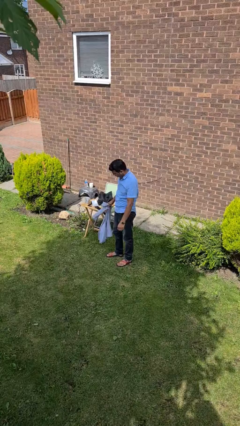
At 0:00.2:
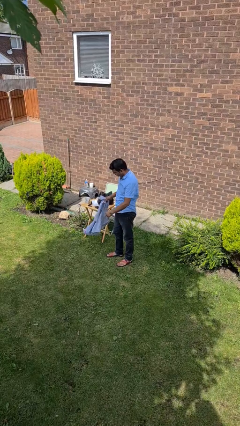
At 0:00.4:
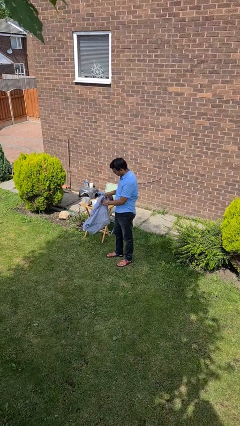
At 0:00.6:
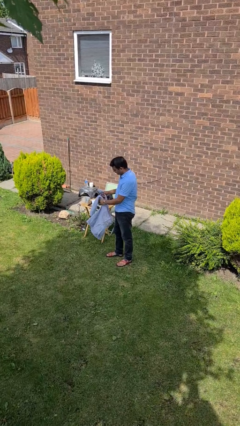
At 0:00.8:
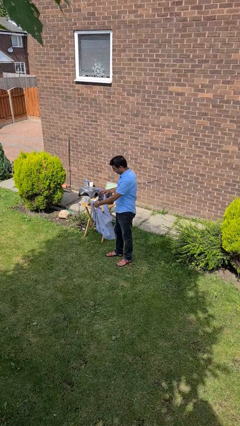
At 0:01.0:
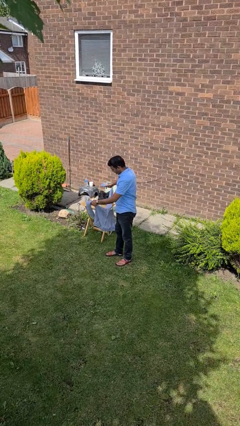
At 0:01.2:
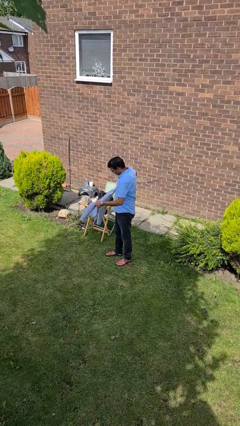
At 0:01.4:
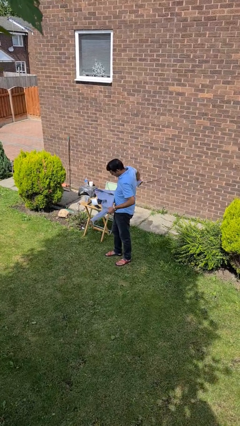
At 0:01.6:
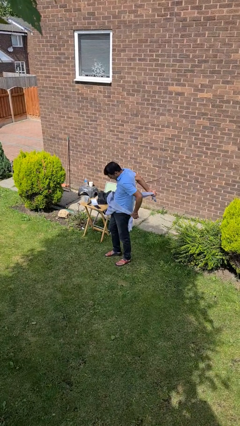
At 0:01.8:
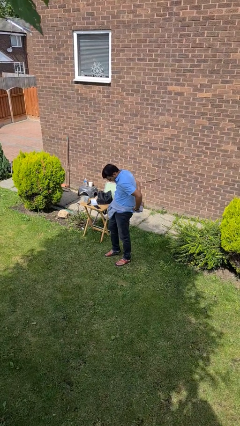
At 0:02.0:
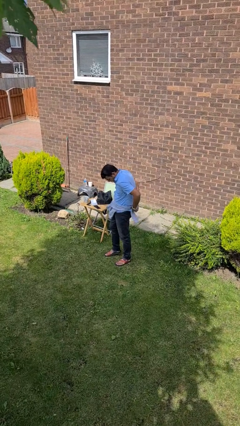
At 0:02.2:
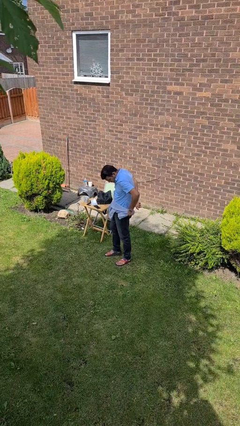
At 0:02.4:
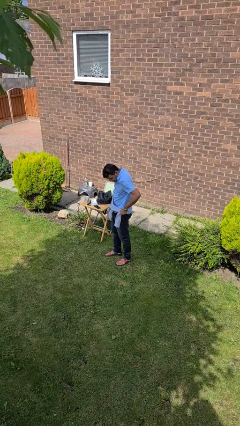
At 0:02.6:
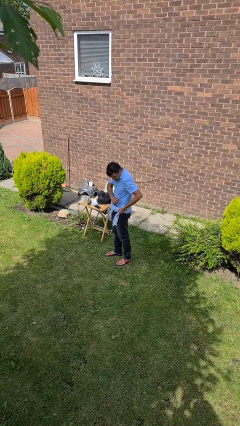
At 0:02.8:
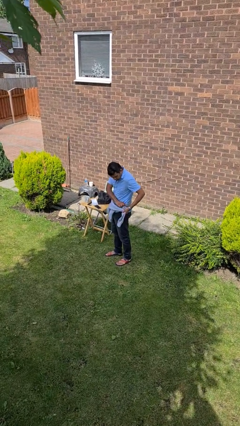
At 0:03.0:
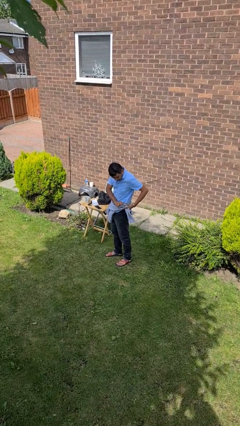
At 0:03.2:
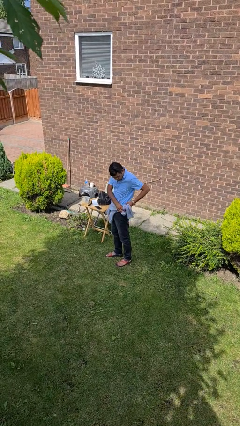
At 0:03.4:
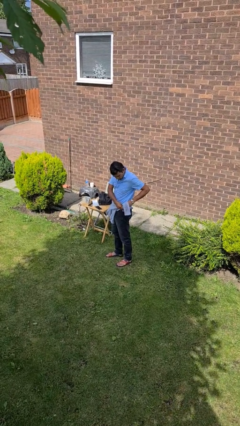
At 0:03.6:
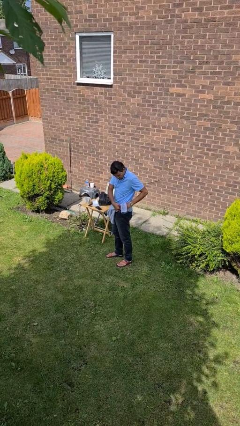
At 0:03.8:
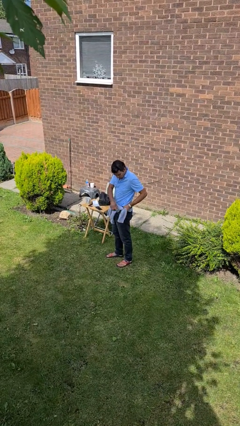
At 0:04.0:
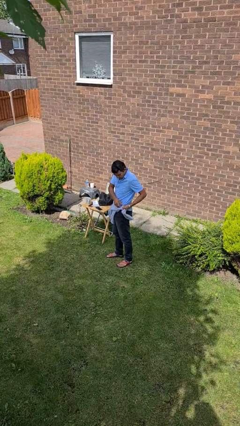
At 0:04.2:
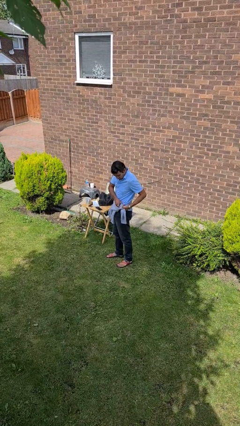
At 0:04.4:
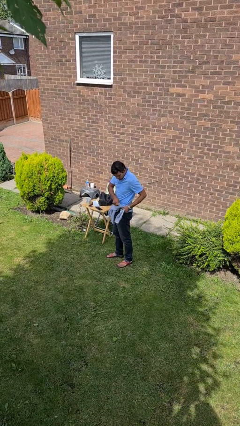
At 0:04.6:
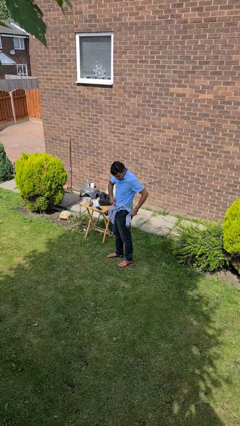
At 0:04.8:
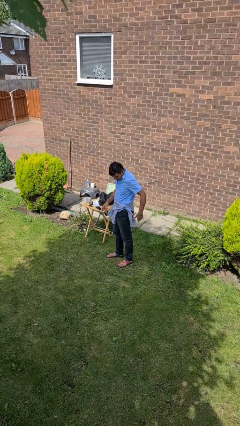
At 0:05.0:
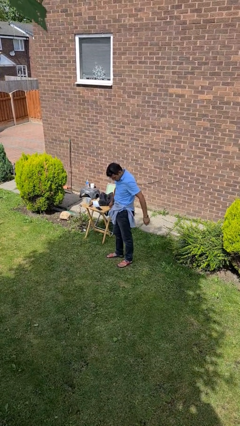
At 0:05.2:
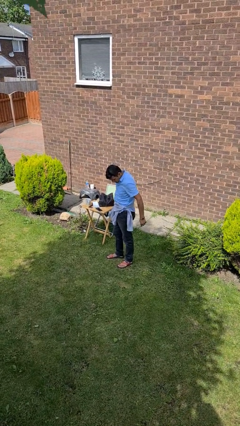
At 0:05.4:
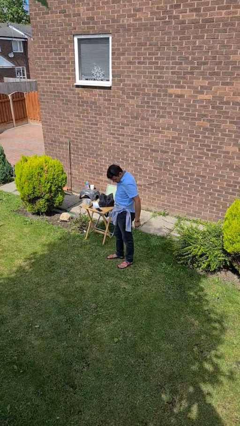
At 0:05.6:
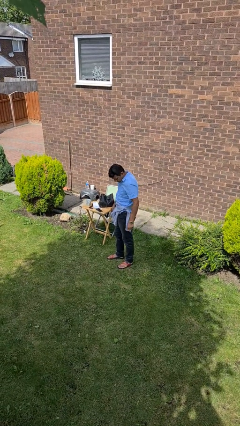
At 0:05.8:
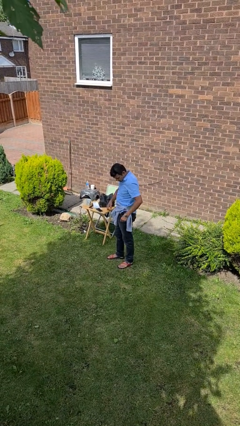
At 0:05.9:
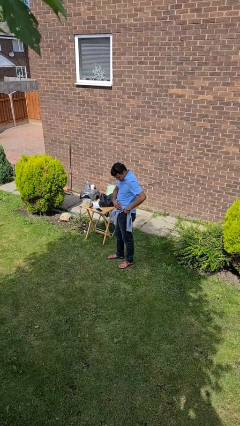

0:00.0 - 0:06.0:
person ties jacket around waist

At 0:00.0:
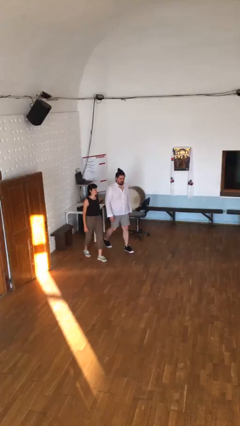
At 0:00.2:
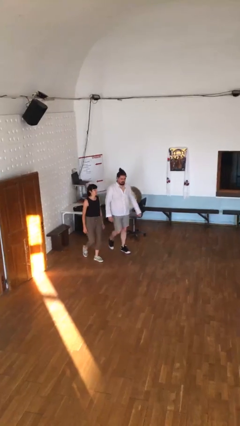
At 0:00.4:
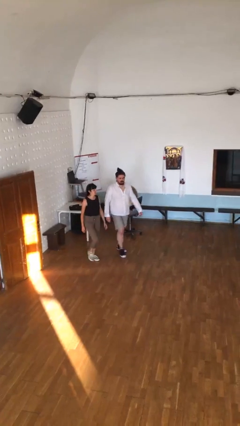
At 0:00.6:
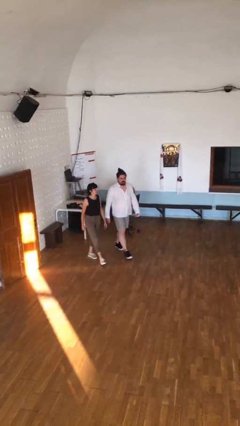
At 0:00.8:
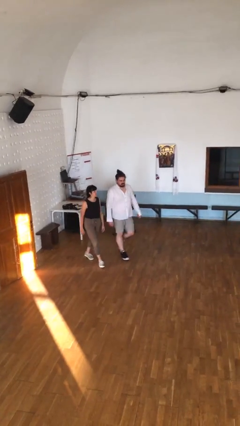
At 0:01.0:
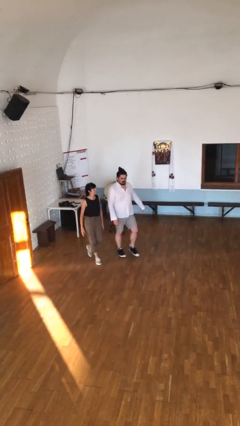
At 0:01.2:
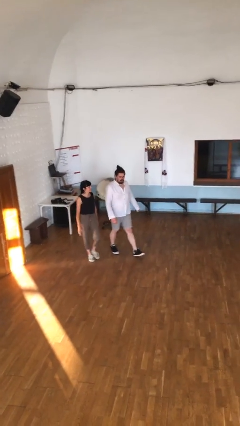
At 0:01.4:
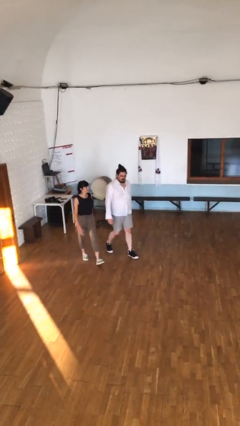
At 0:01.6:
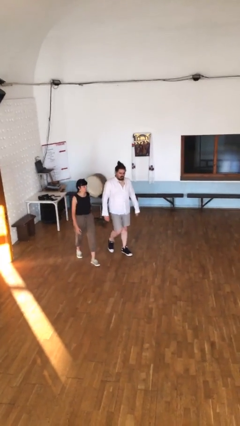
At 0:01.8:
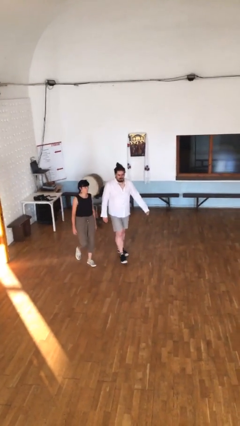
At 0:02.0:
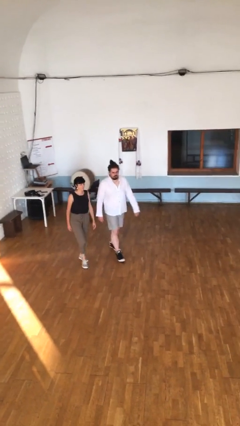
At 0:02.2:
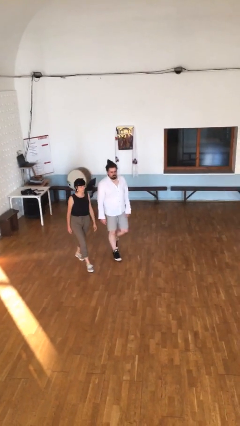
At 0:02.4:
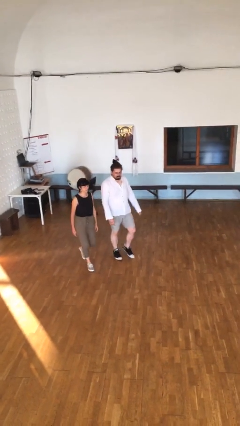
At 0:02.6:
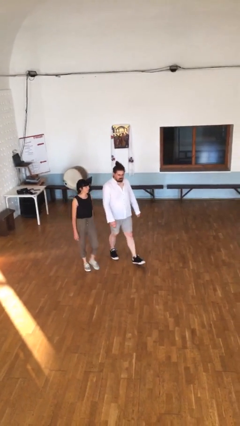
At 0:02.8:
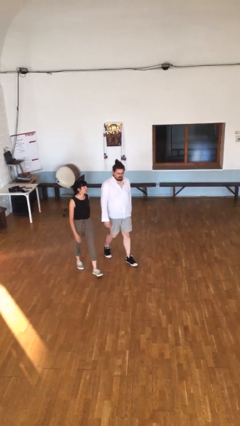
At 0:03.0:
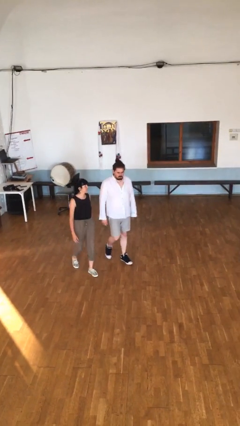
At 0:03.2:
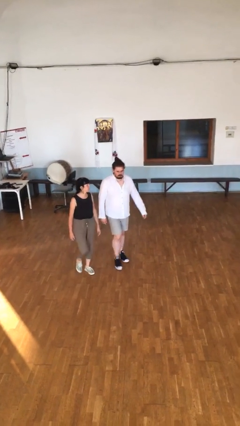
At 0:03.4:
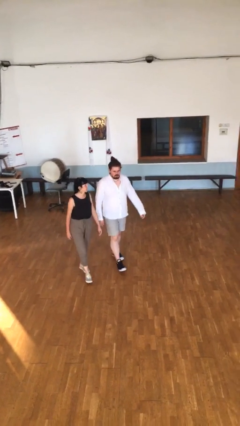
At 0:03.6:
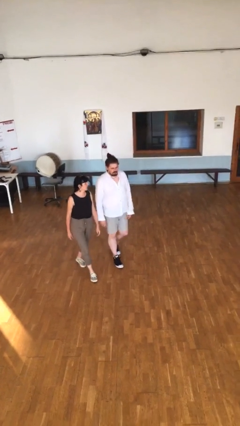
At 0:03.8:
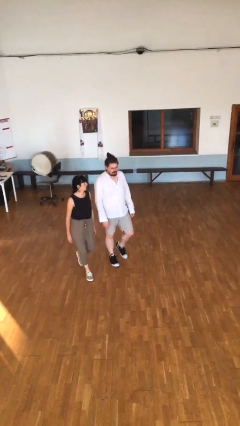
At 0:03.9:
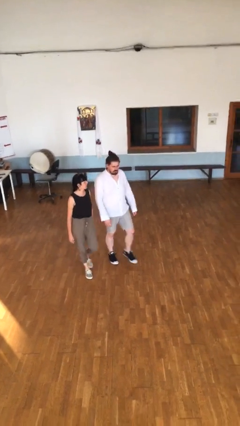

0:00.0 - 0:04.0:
person talks to person

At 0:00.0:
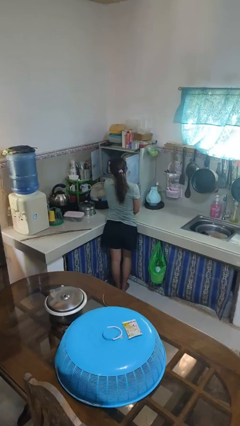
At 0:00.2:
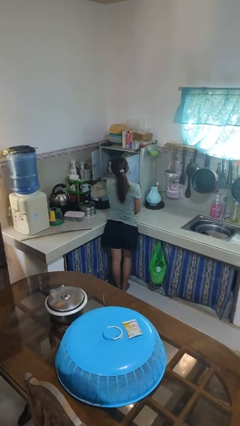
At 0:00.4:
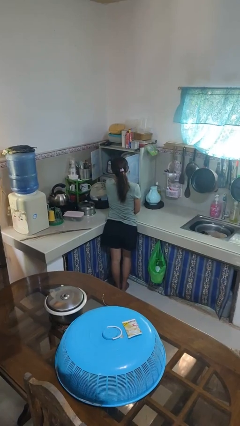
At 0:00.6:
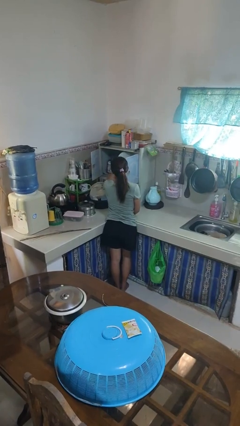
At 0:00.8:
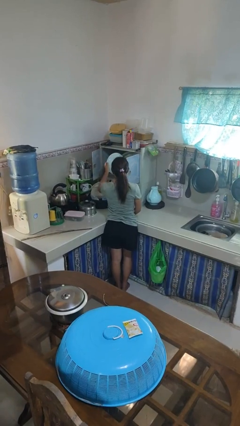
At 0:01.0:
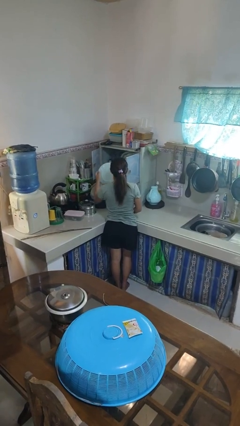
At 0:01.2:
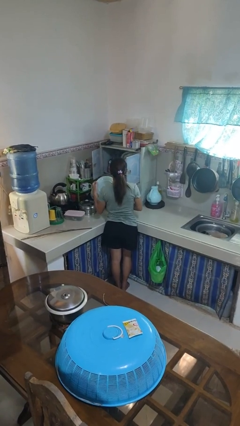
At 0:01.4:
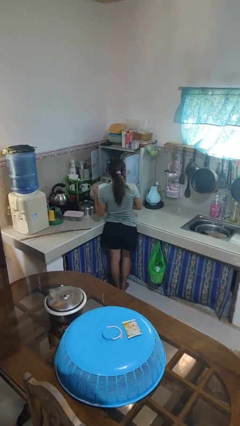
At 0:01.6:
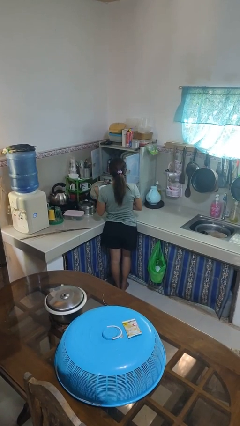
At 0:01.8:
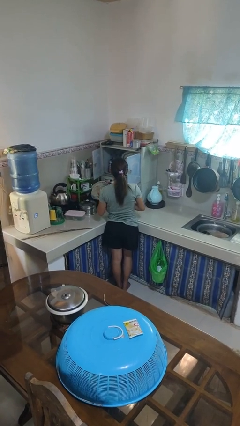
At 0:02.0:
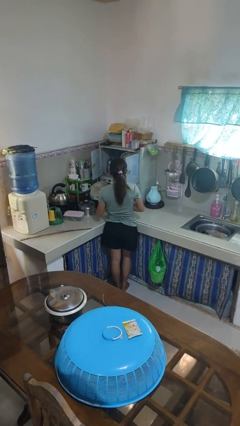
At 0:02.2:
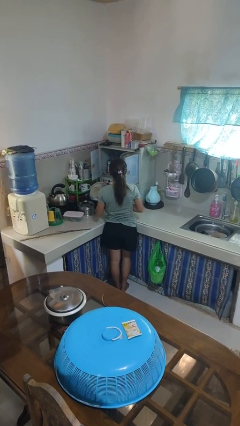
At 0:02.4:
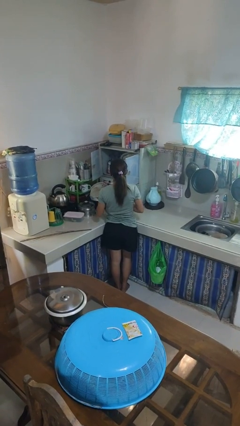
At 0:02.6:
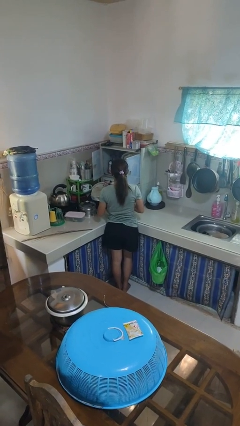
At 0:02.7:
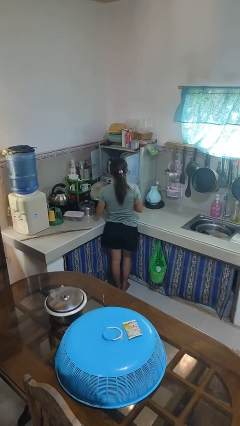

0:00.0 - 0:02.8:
person takes object from kitchen drawer

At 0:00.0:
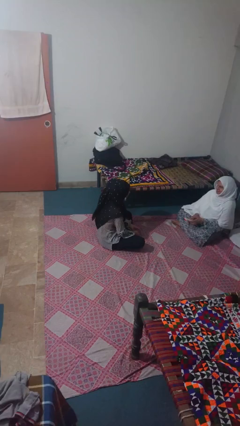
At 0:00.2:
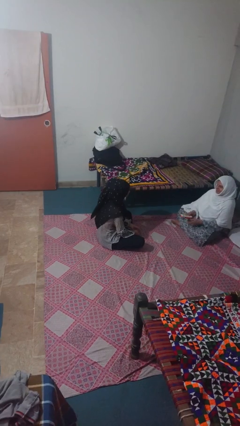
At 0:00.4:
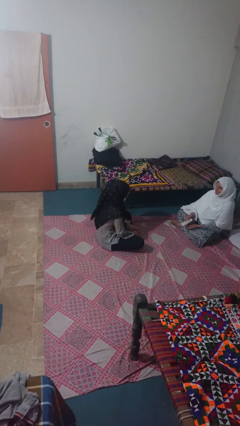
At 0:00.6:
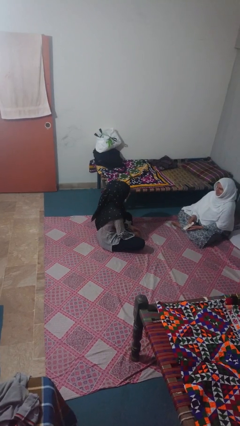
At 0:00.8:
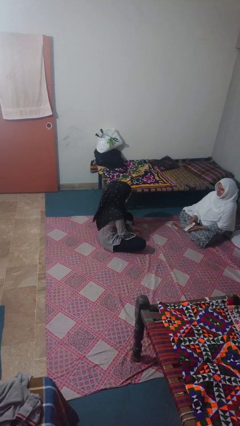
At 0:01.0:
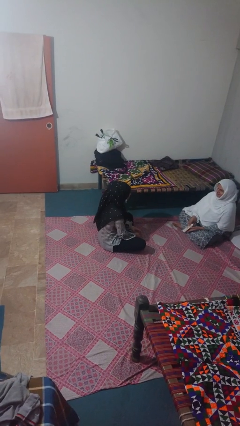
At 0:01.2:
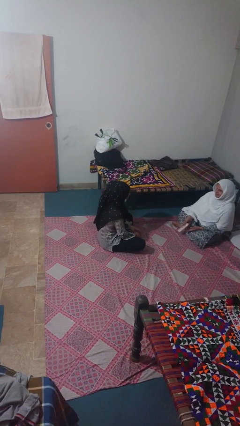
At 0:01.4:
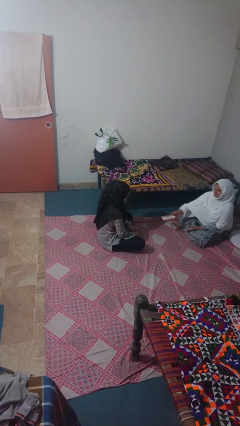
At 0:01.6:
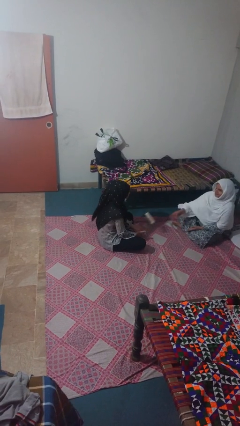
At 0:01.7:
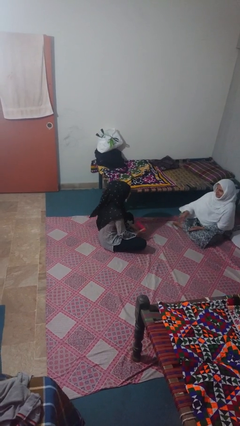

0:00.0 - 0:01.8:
person catches object from person

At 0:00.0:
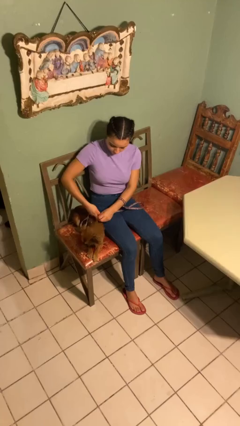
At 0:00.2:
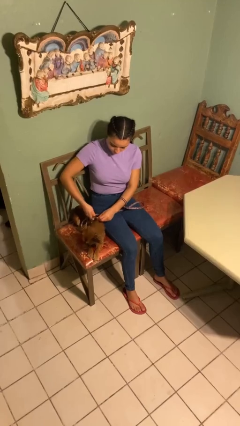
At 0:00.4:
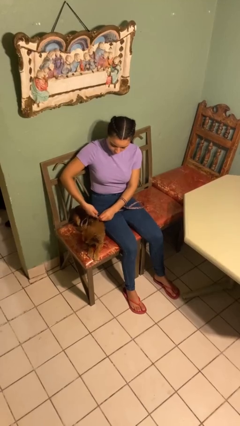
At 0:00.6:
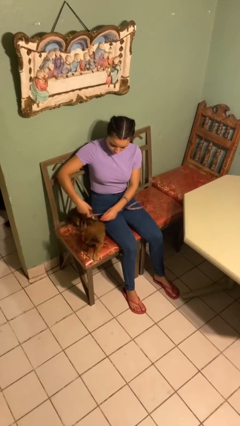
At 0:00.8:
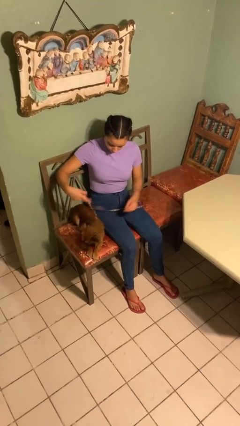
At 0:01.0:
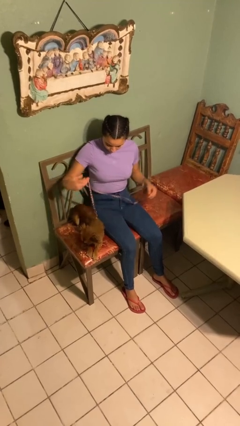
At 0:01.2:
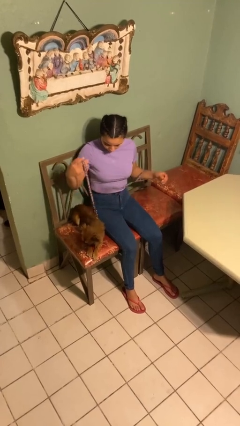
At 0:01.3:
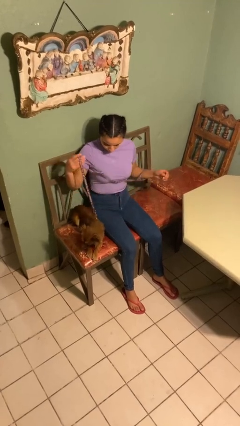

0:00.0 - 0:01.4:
person attaches leash to dog

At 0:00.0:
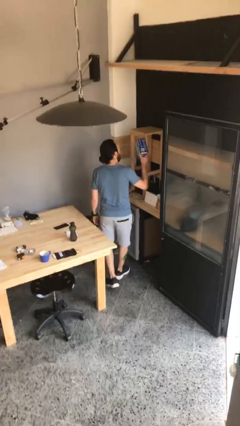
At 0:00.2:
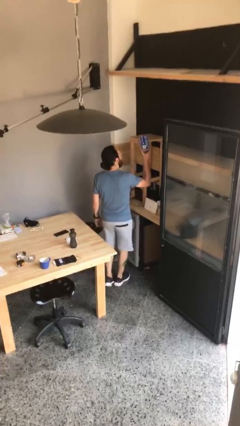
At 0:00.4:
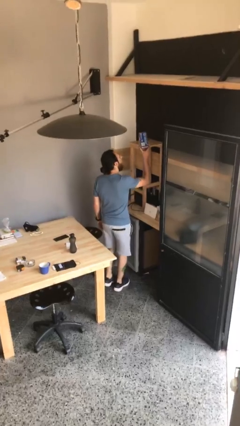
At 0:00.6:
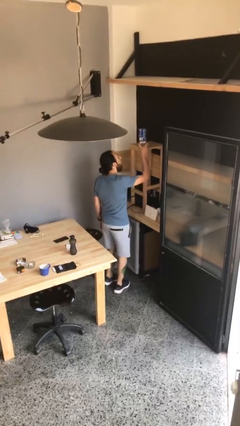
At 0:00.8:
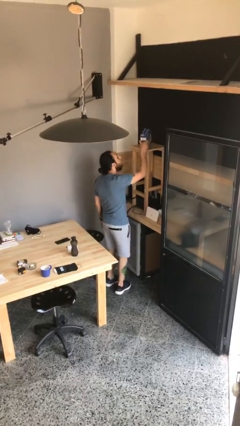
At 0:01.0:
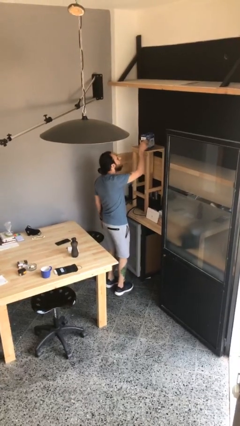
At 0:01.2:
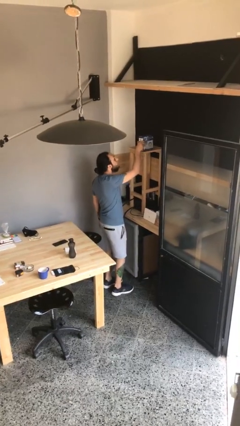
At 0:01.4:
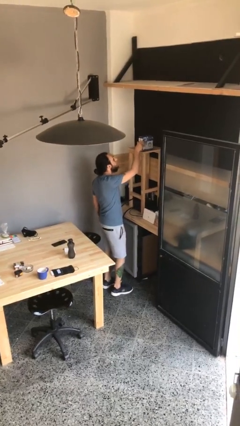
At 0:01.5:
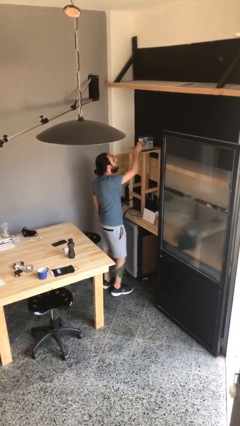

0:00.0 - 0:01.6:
person puts down object on shelf
